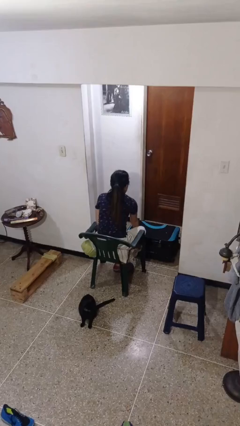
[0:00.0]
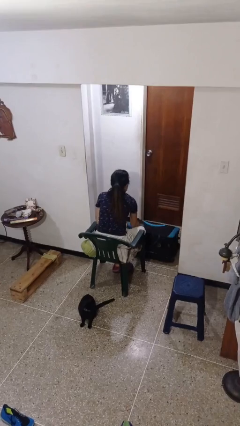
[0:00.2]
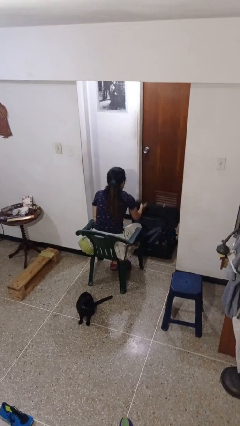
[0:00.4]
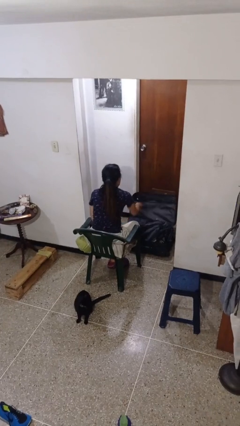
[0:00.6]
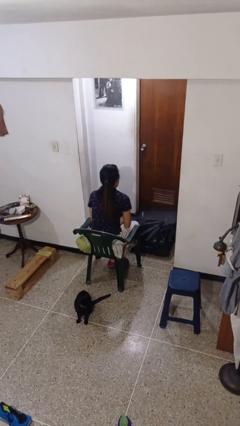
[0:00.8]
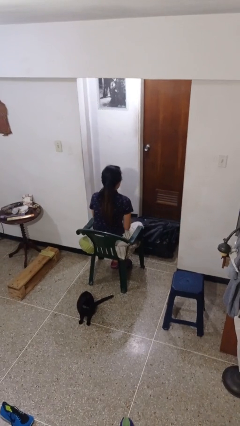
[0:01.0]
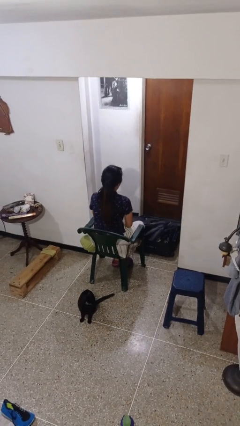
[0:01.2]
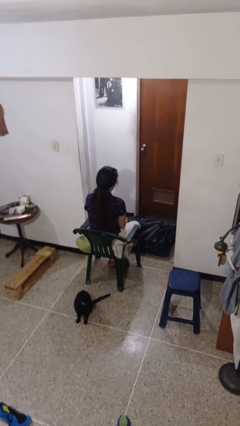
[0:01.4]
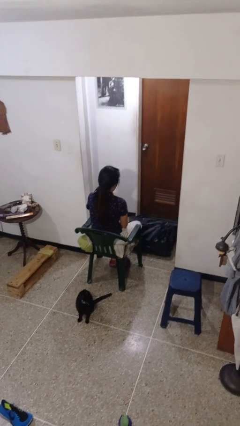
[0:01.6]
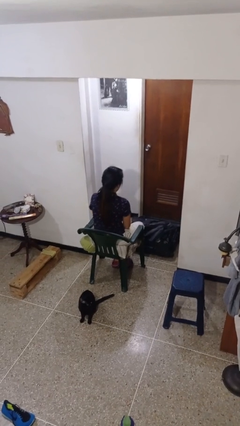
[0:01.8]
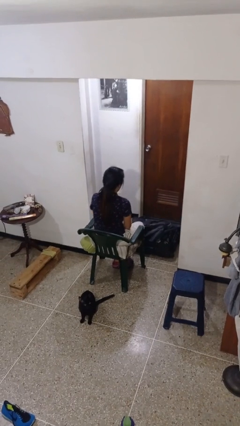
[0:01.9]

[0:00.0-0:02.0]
person opens suitcase

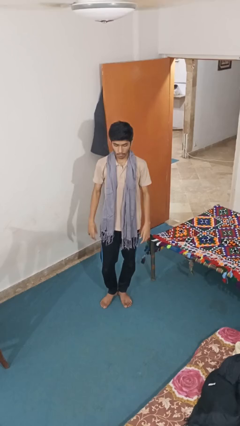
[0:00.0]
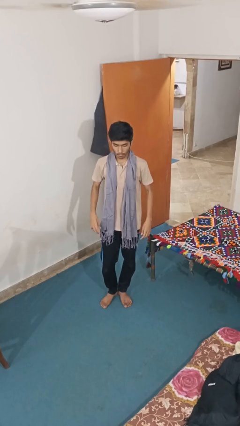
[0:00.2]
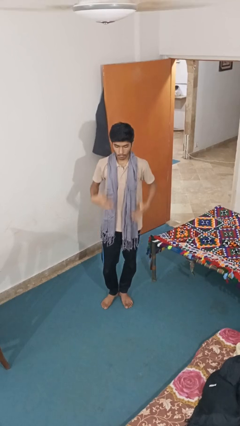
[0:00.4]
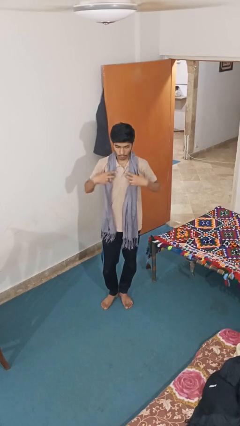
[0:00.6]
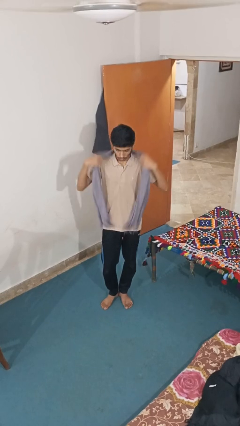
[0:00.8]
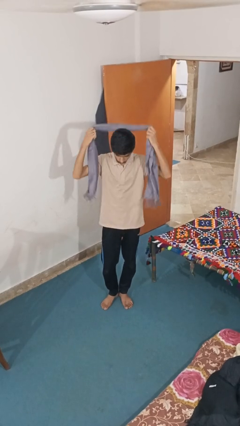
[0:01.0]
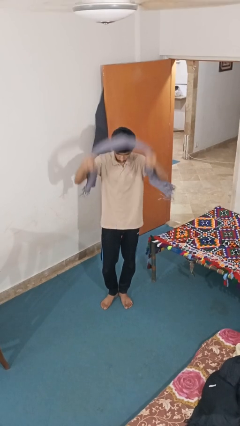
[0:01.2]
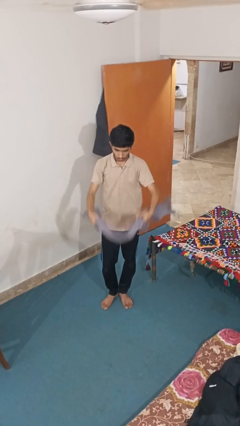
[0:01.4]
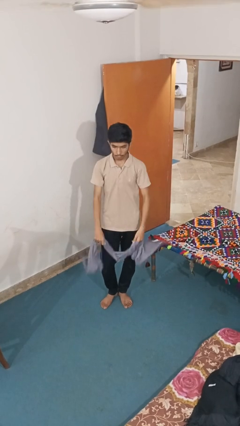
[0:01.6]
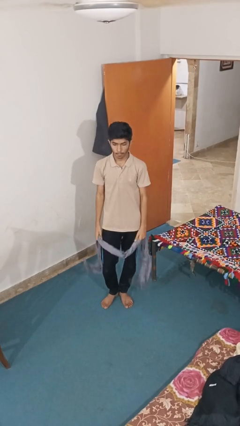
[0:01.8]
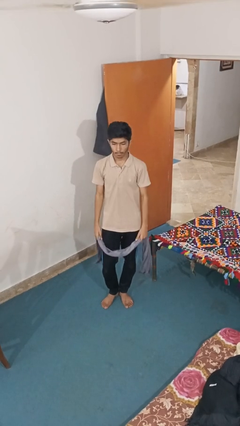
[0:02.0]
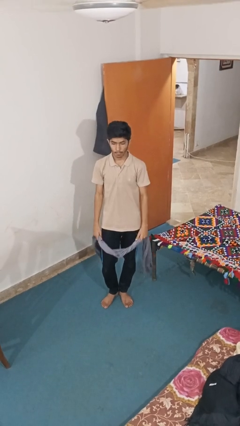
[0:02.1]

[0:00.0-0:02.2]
person takes off scarf

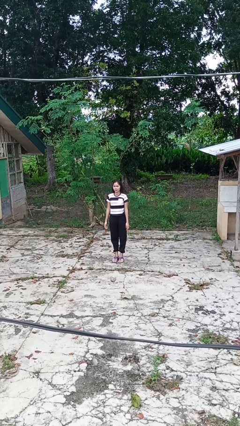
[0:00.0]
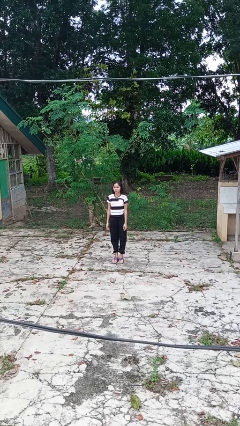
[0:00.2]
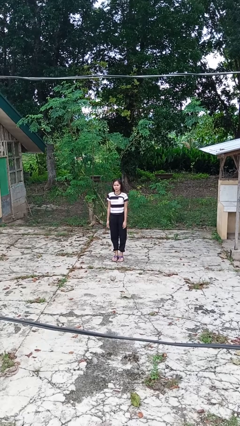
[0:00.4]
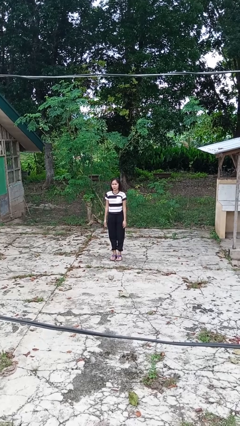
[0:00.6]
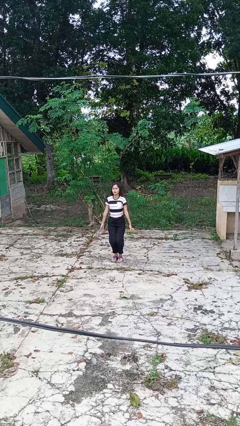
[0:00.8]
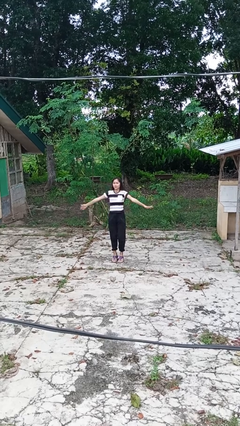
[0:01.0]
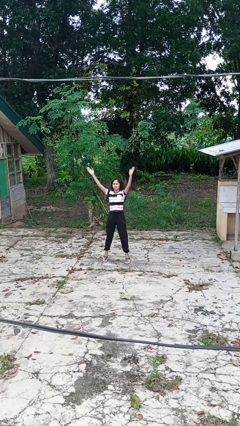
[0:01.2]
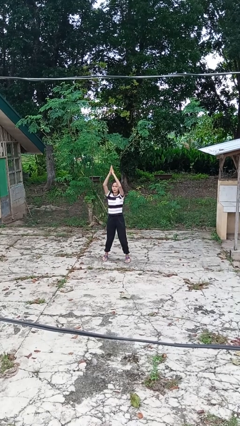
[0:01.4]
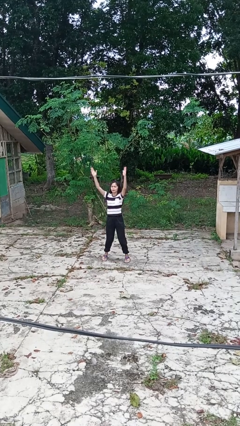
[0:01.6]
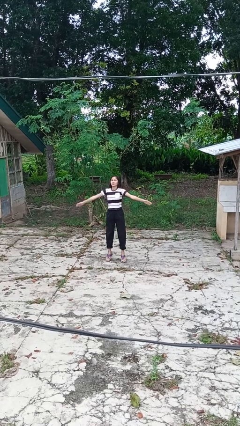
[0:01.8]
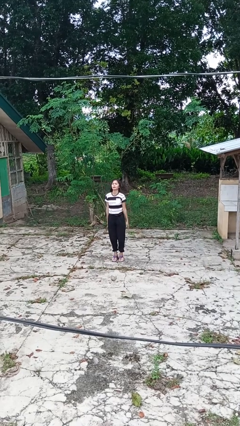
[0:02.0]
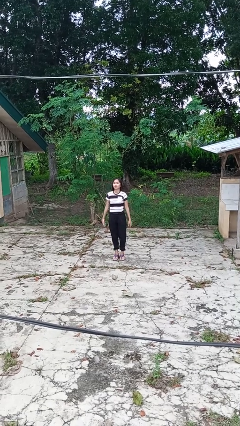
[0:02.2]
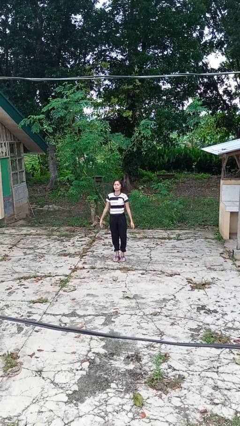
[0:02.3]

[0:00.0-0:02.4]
person exercises with jumping jacks

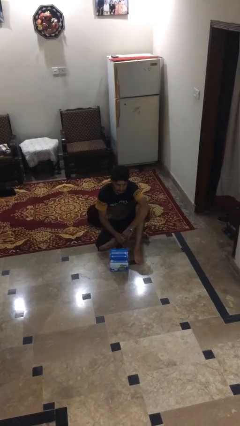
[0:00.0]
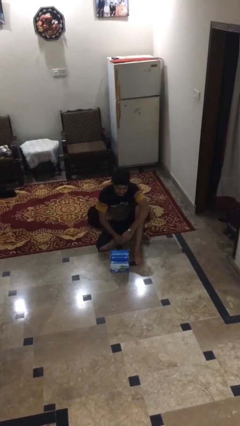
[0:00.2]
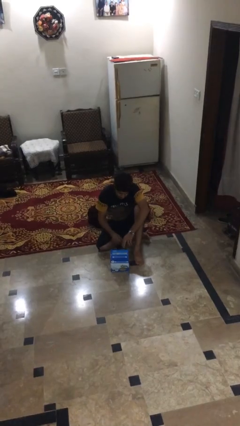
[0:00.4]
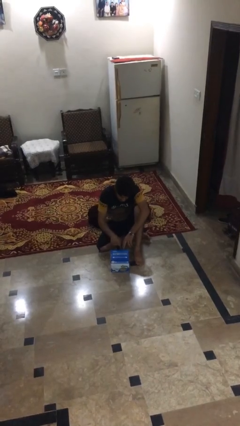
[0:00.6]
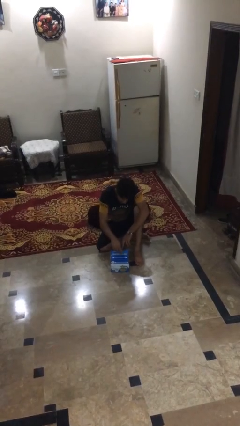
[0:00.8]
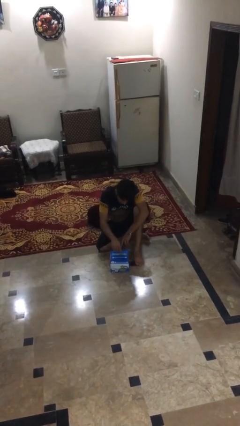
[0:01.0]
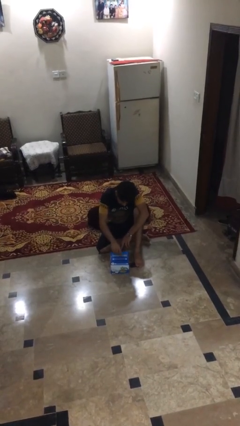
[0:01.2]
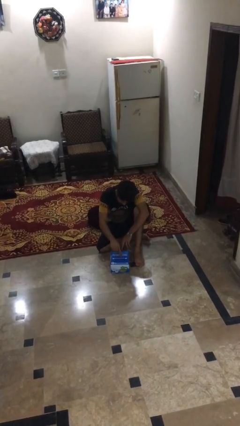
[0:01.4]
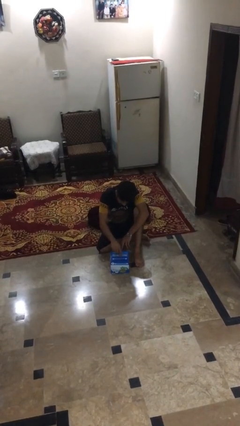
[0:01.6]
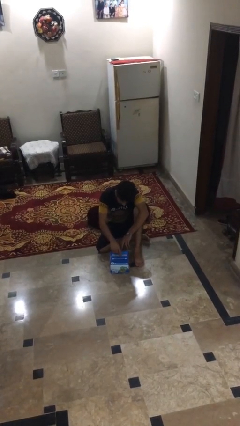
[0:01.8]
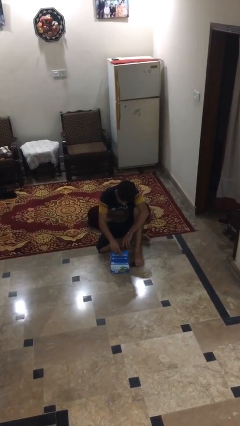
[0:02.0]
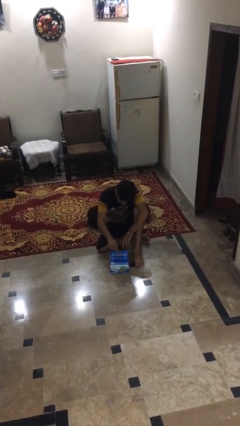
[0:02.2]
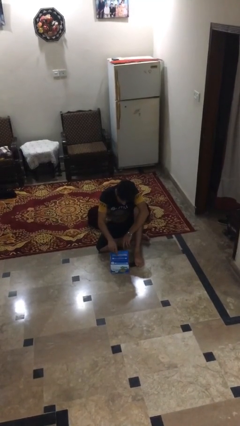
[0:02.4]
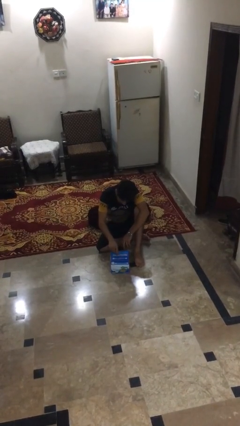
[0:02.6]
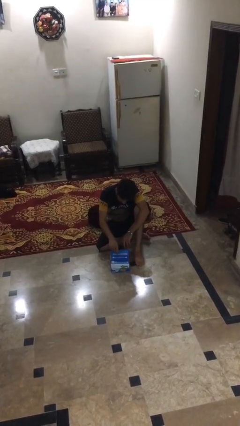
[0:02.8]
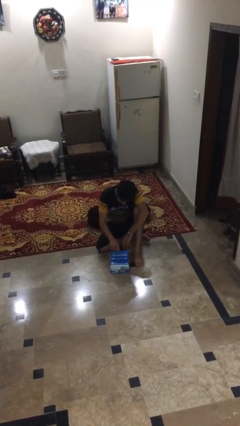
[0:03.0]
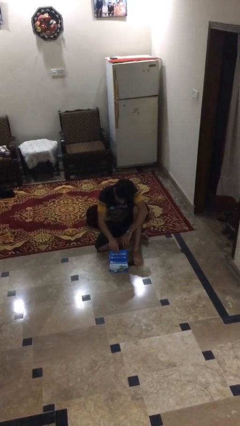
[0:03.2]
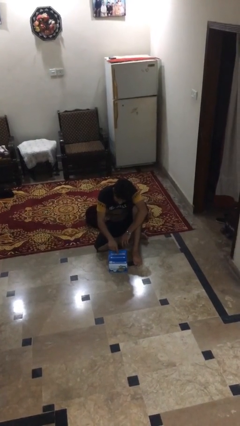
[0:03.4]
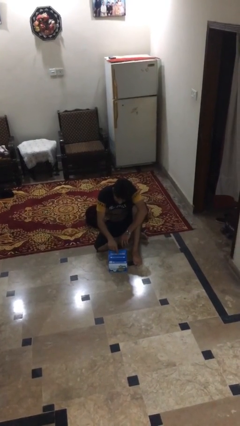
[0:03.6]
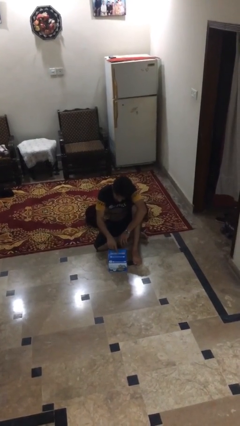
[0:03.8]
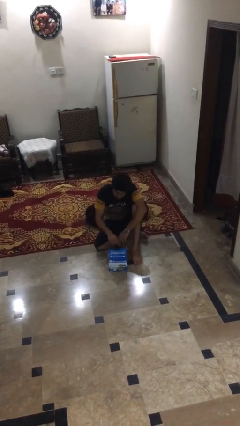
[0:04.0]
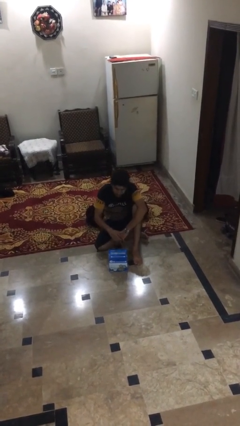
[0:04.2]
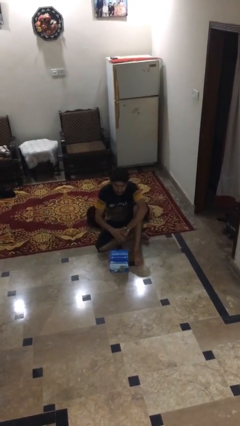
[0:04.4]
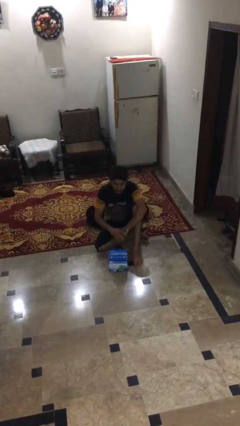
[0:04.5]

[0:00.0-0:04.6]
person taps object with finger

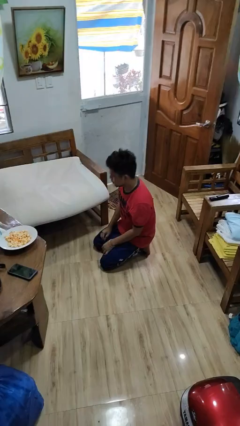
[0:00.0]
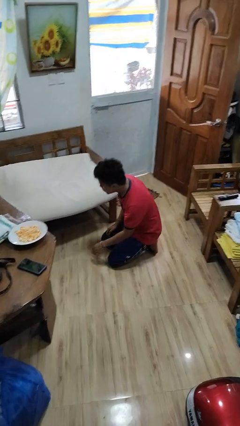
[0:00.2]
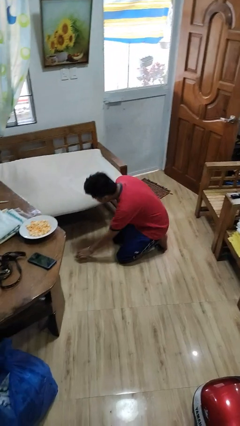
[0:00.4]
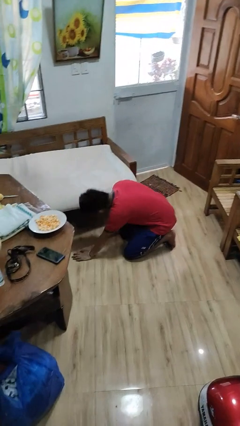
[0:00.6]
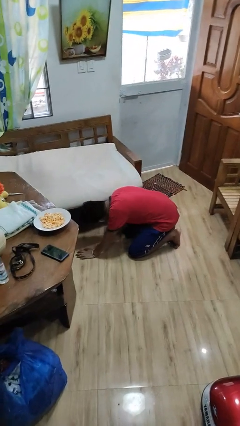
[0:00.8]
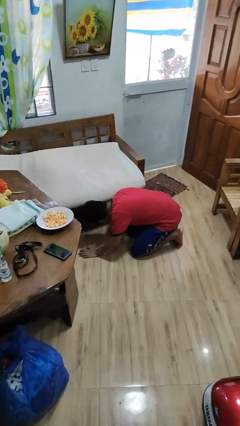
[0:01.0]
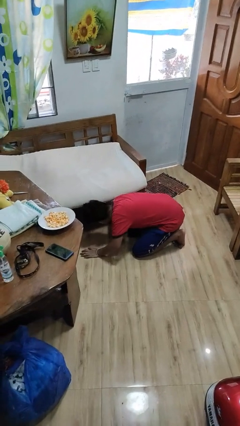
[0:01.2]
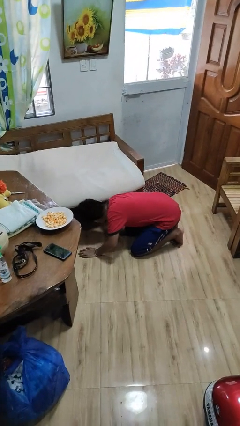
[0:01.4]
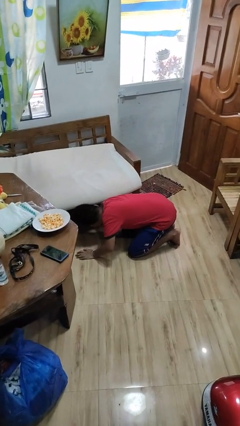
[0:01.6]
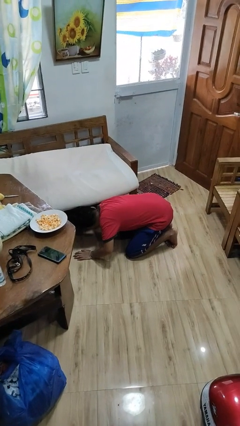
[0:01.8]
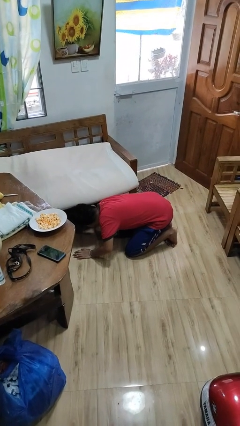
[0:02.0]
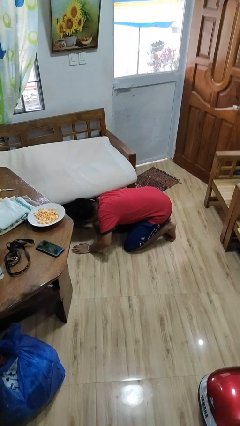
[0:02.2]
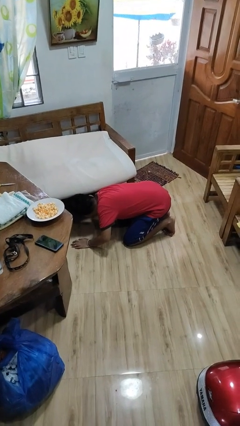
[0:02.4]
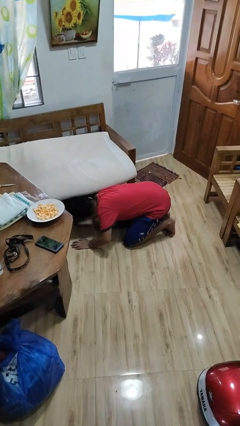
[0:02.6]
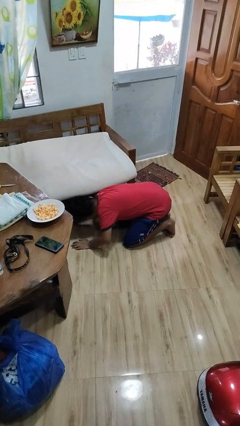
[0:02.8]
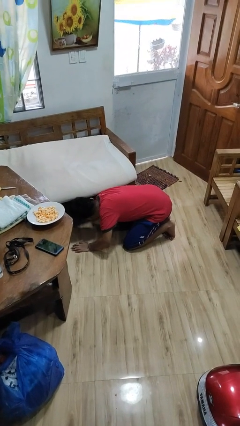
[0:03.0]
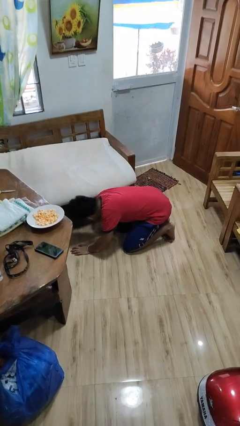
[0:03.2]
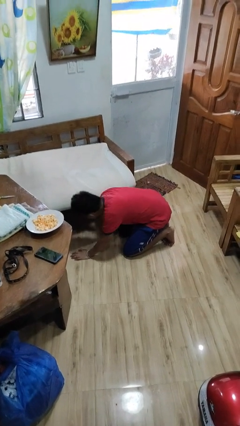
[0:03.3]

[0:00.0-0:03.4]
person searches under couch

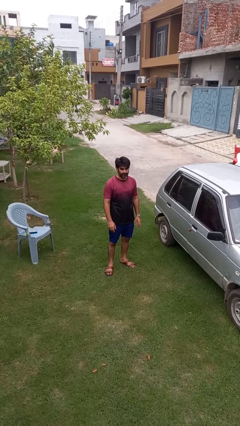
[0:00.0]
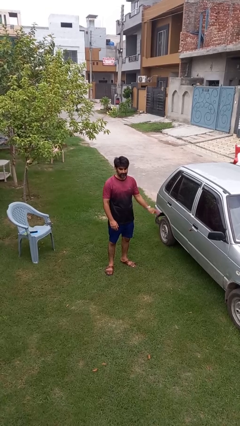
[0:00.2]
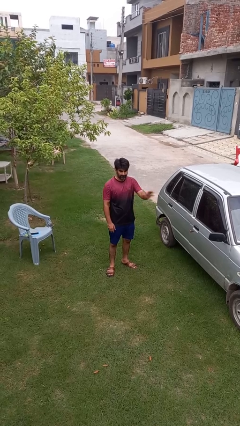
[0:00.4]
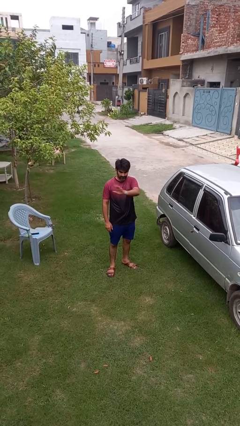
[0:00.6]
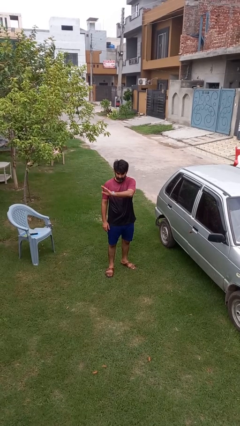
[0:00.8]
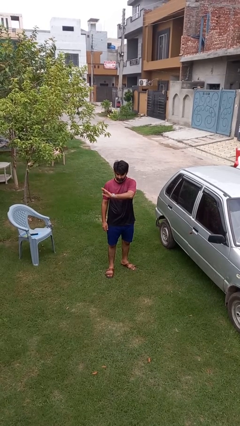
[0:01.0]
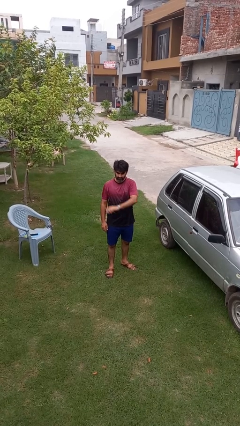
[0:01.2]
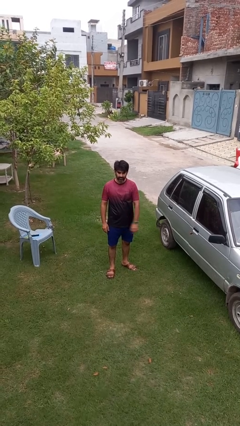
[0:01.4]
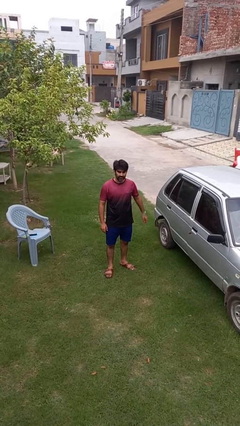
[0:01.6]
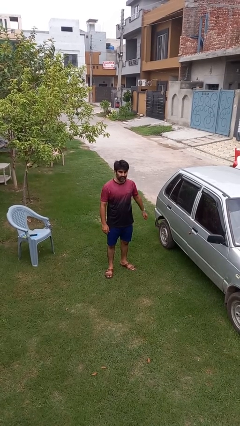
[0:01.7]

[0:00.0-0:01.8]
person gestures swipe right

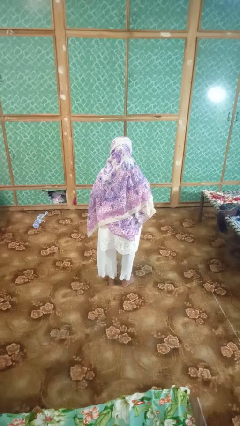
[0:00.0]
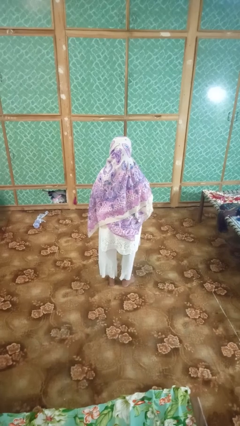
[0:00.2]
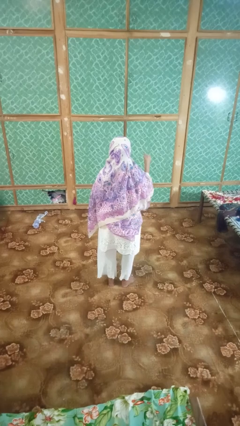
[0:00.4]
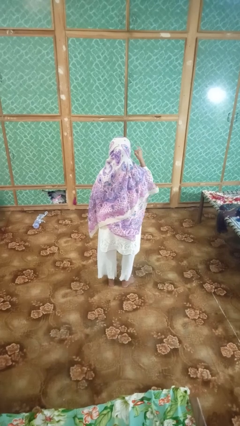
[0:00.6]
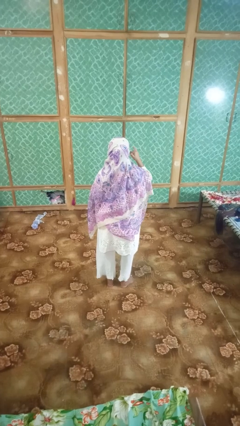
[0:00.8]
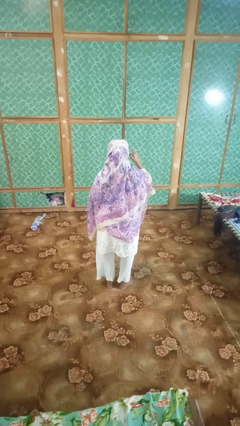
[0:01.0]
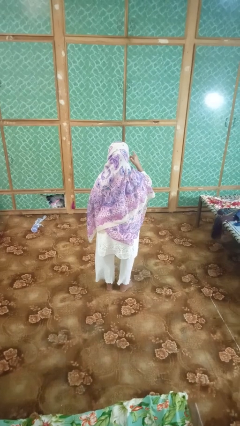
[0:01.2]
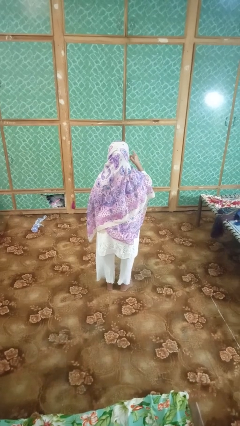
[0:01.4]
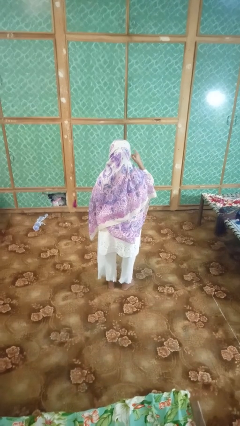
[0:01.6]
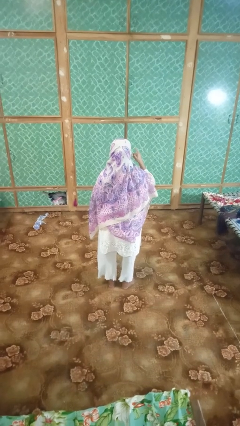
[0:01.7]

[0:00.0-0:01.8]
person gestures call me
